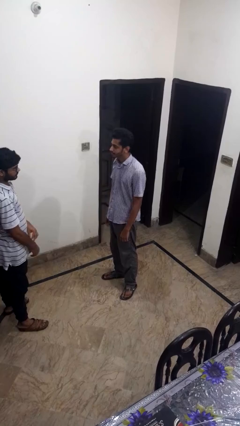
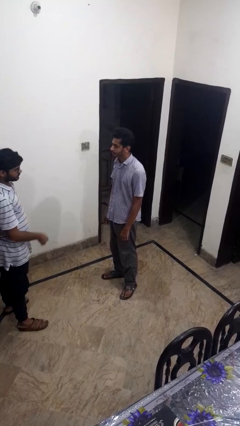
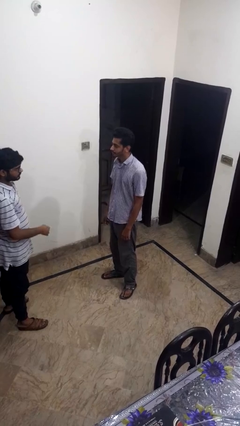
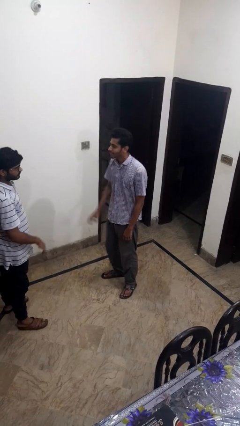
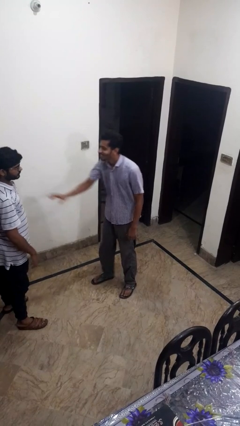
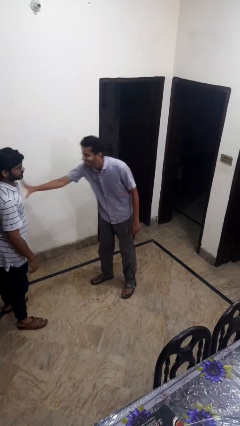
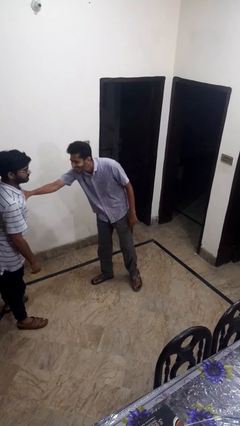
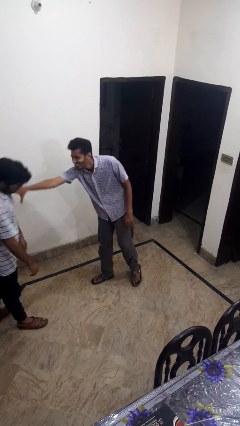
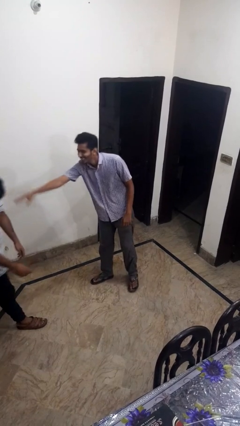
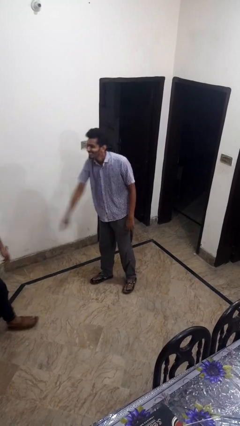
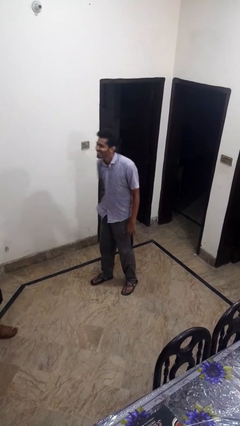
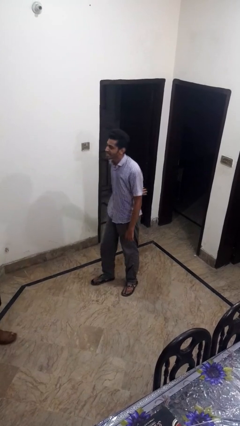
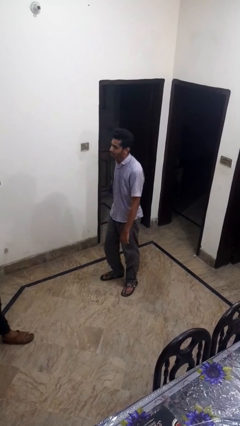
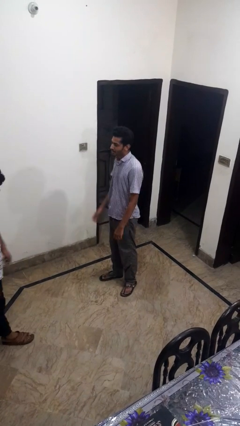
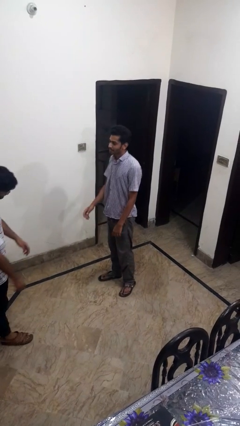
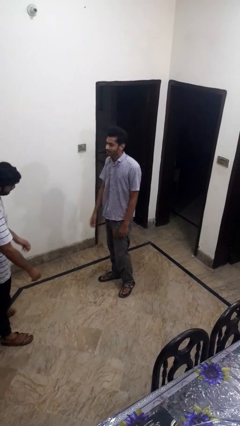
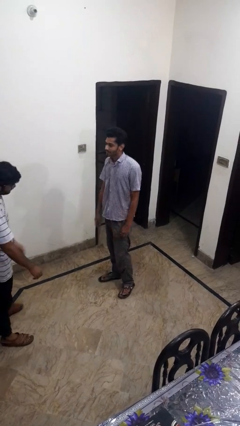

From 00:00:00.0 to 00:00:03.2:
person shoves person

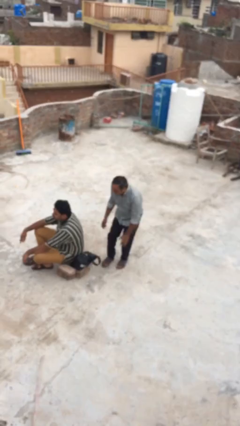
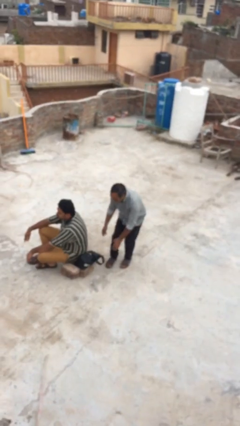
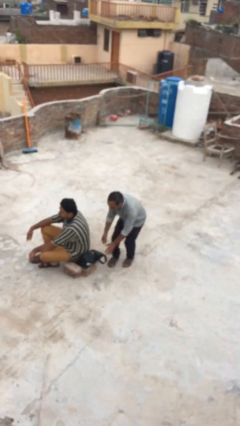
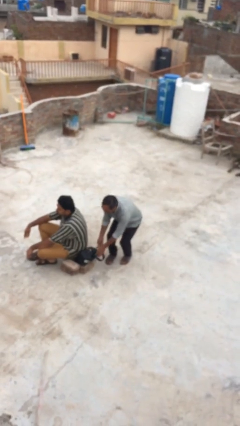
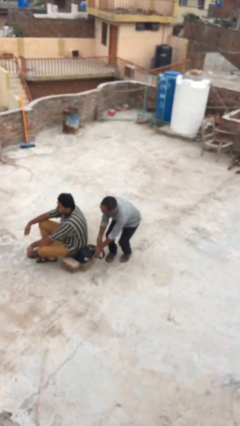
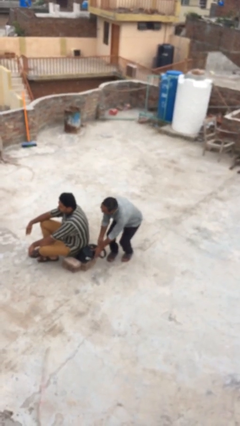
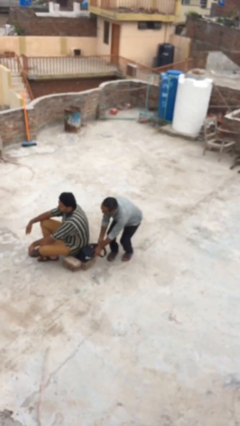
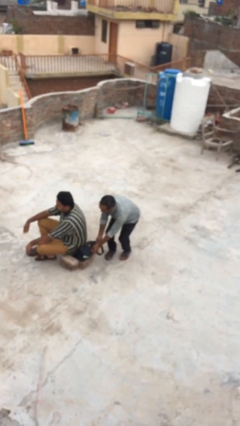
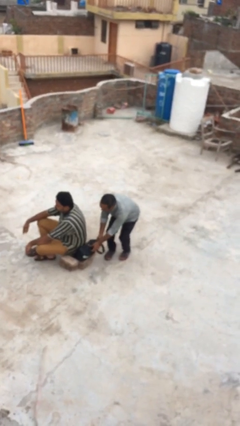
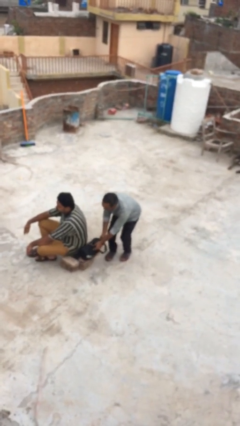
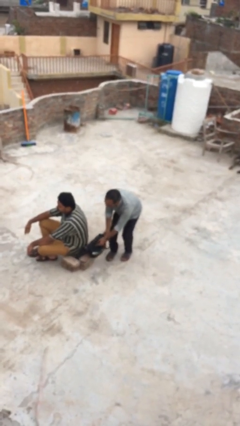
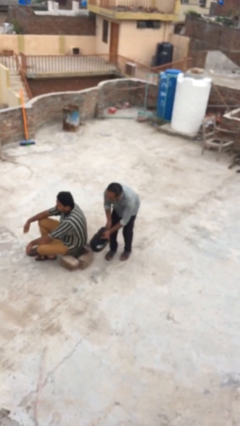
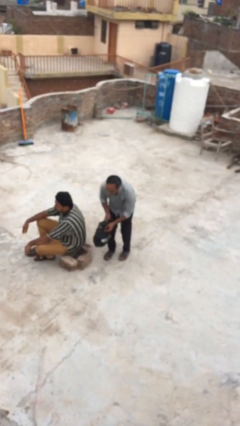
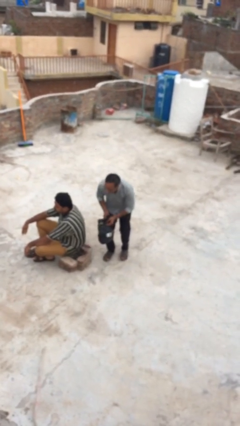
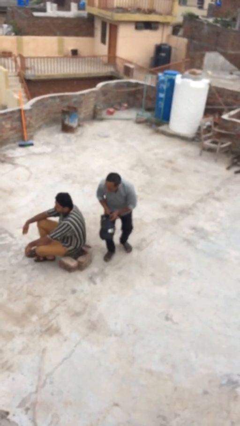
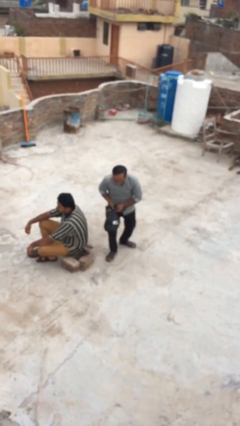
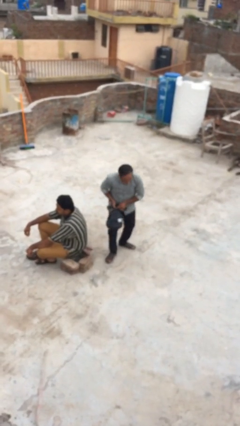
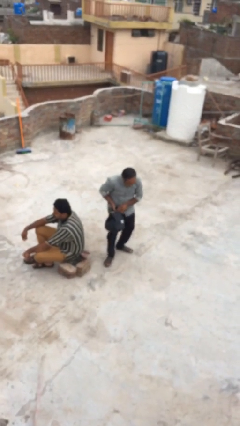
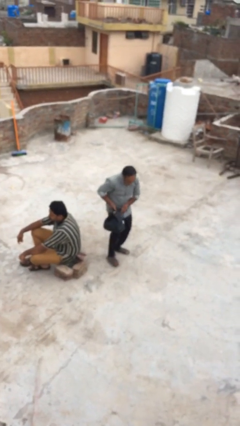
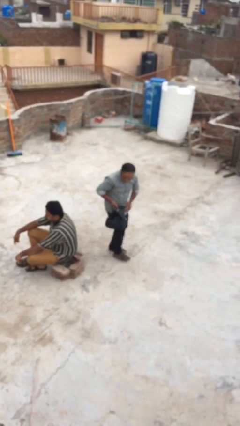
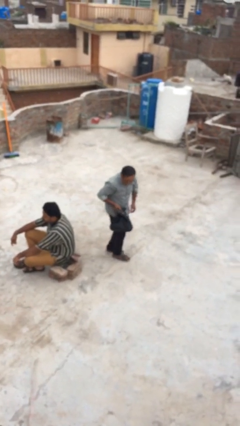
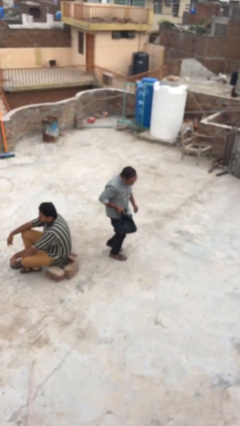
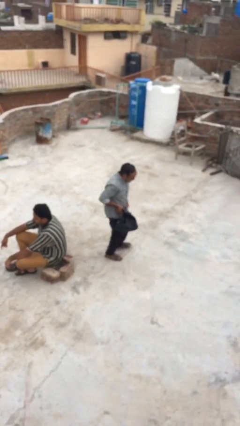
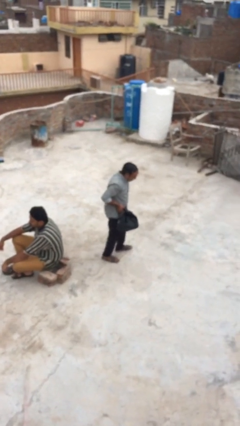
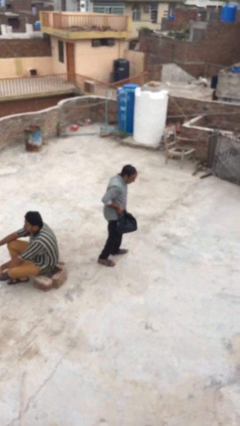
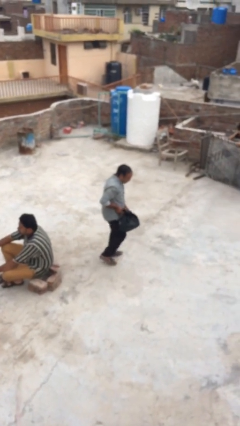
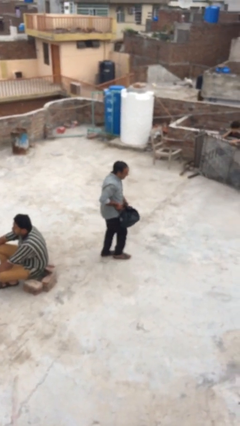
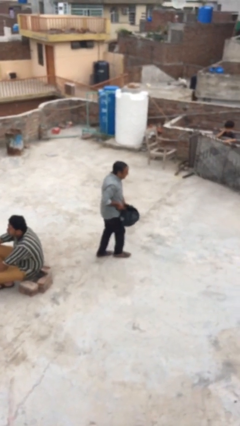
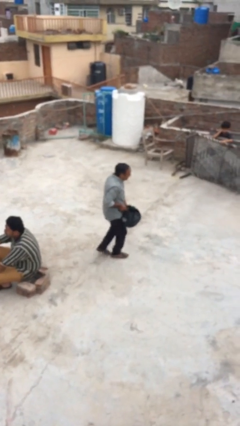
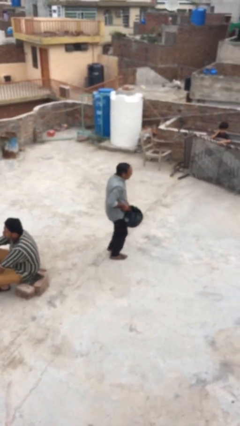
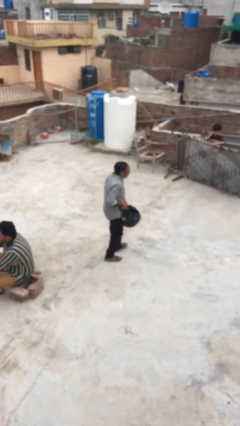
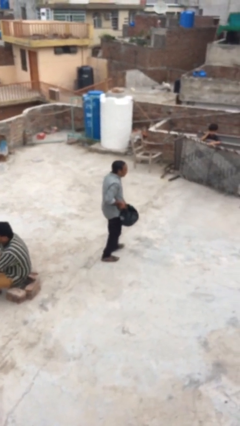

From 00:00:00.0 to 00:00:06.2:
person steals object from person

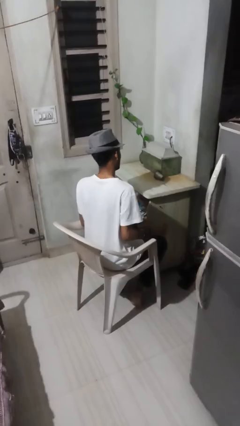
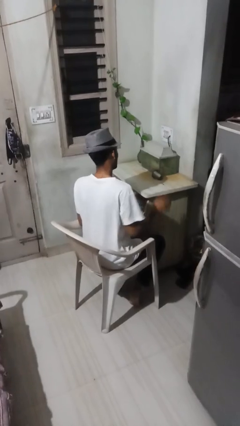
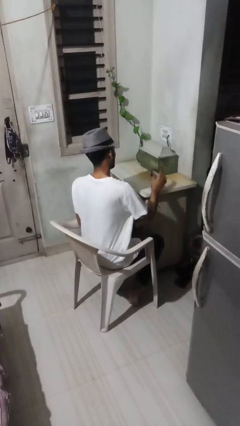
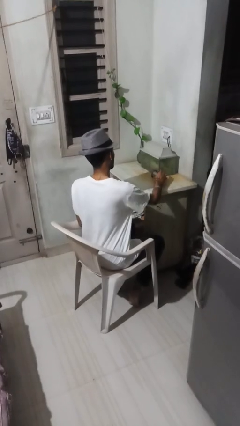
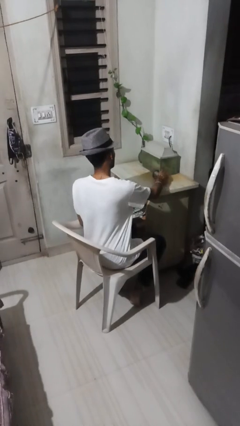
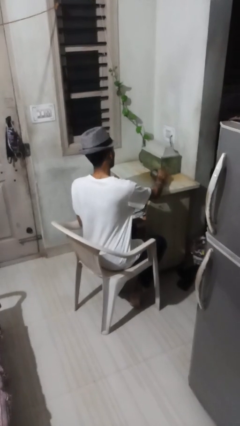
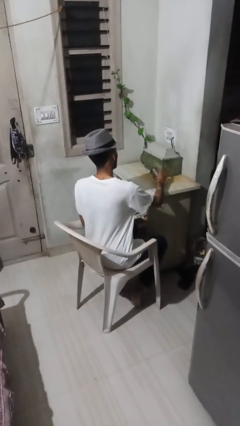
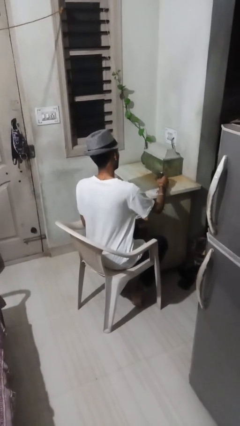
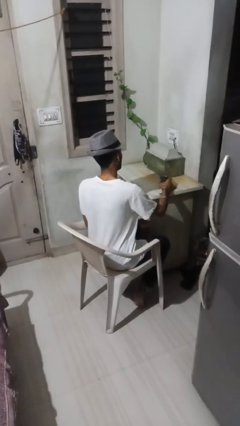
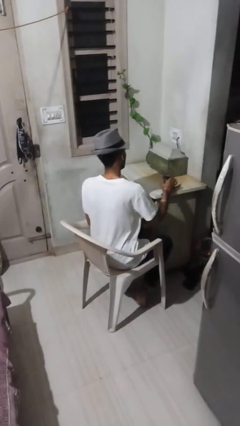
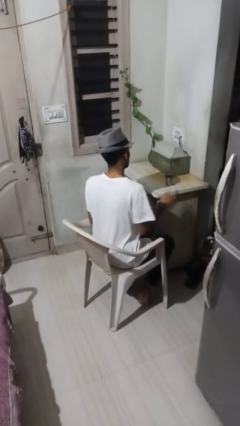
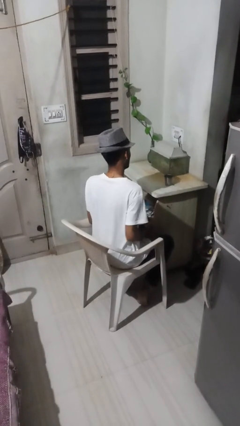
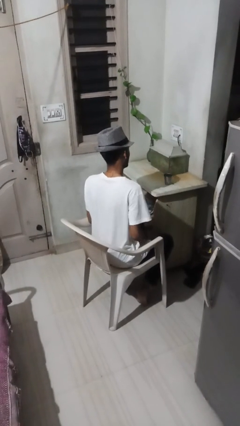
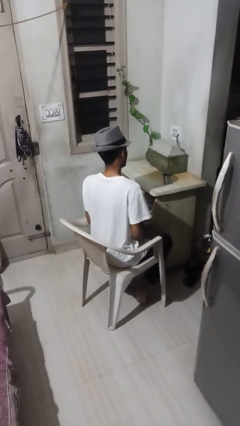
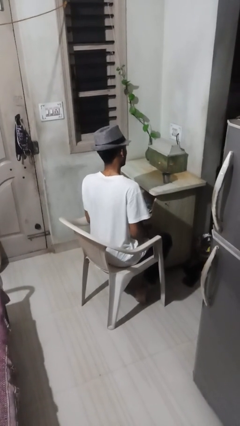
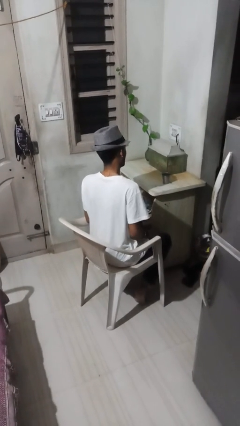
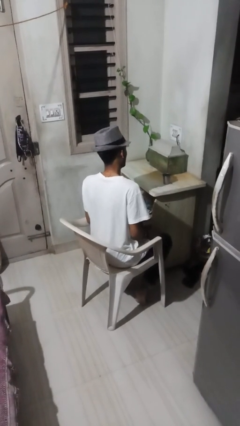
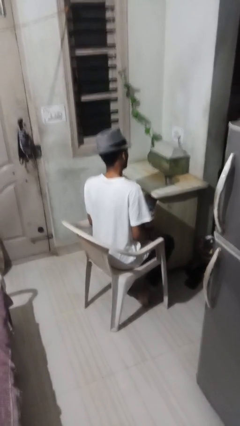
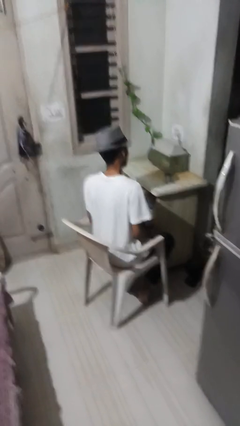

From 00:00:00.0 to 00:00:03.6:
person sets upright glass

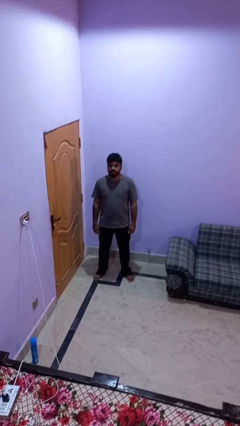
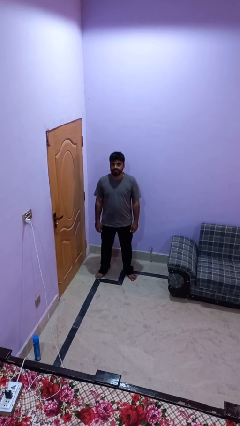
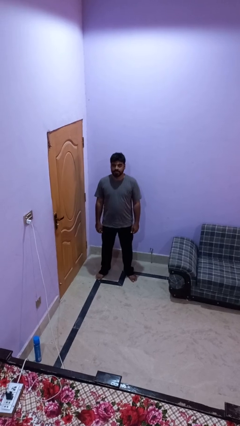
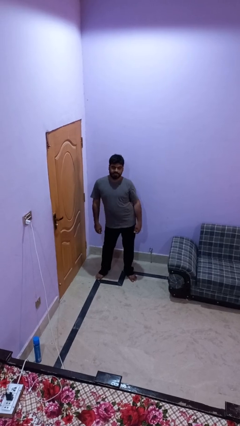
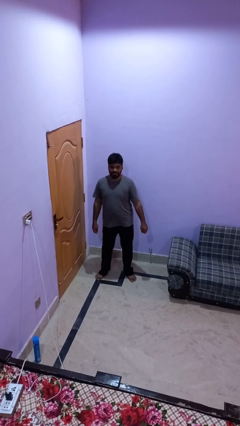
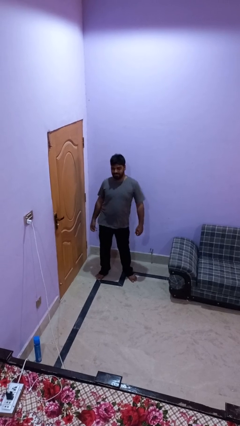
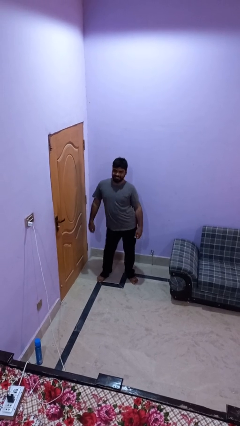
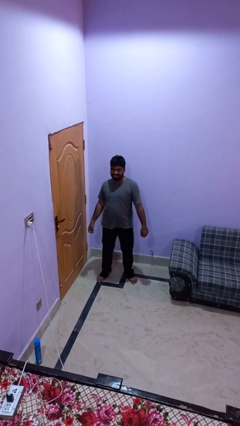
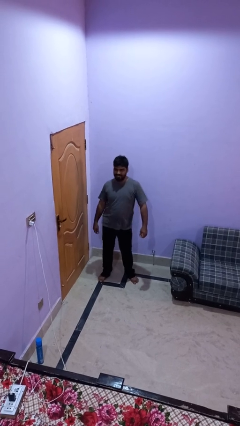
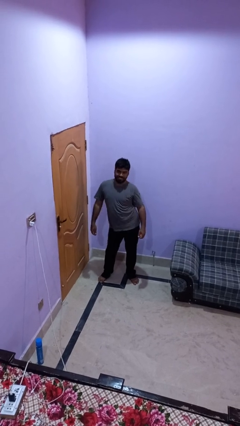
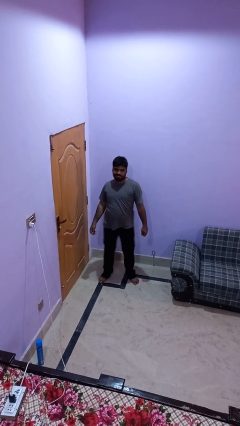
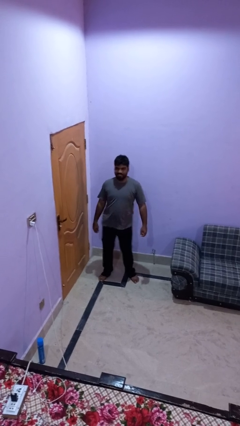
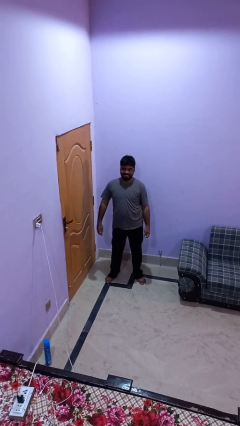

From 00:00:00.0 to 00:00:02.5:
person wiggles hips

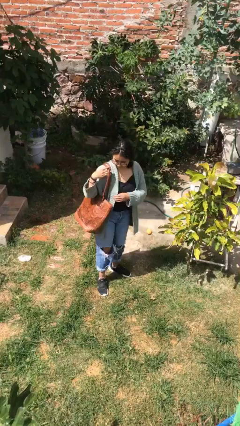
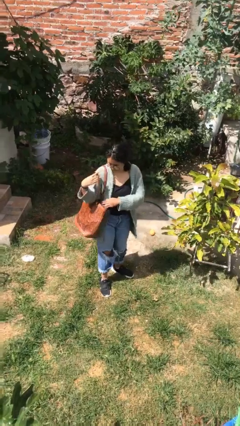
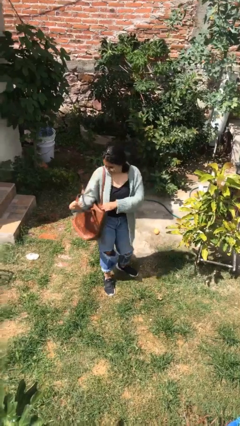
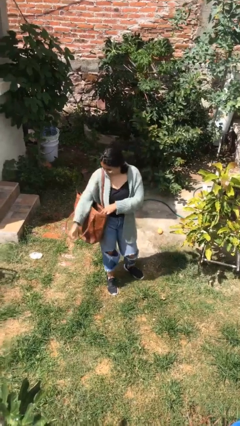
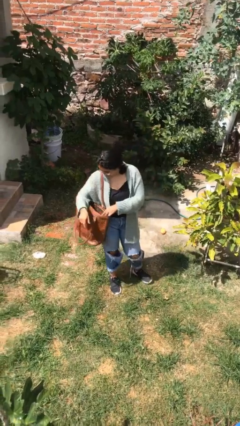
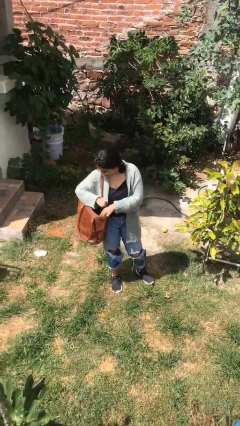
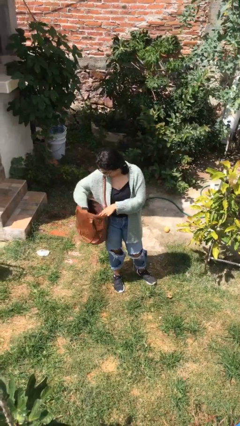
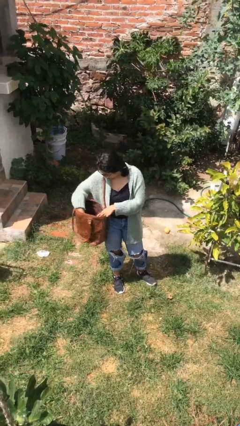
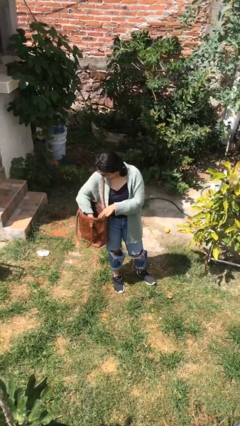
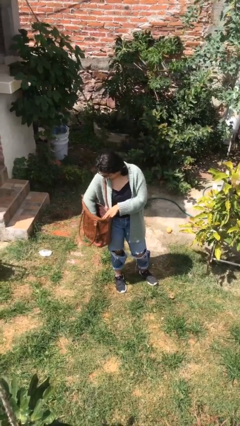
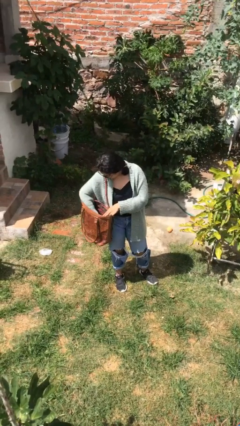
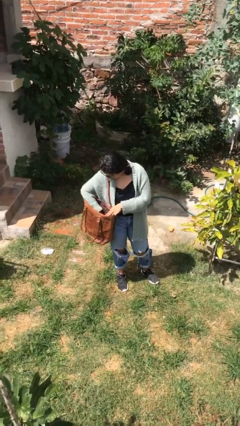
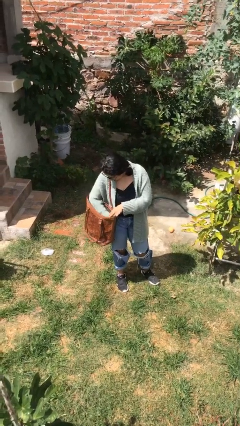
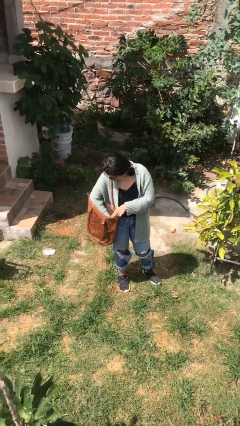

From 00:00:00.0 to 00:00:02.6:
person searches in purse
